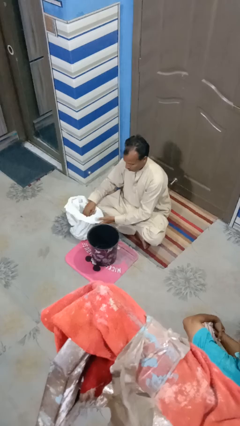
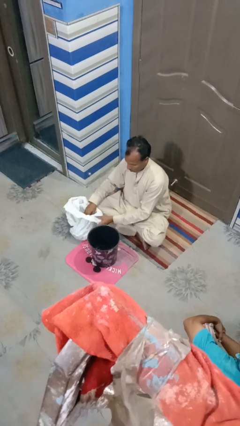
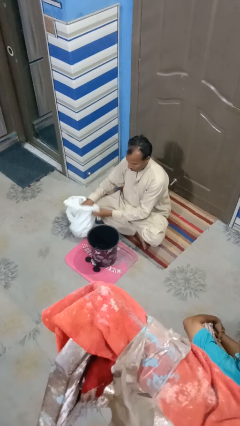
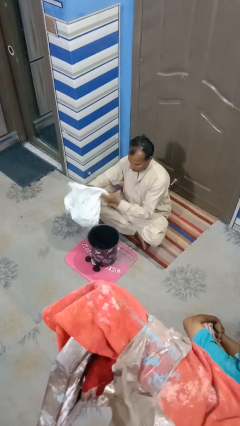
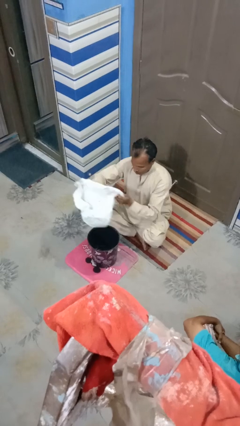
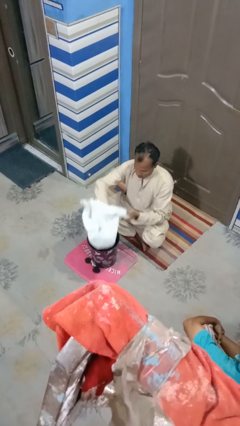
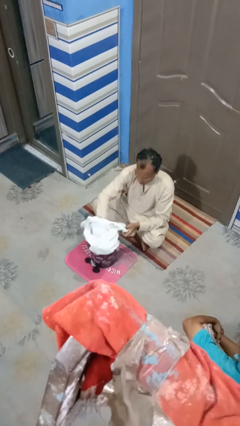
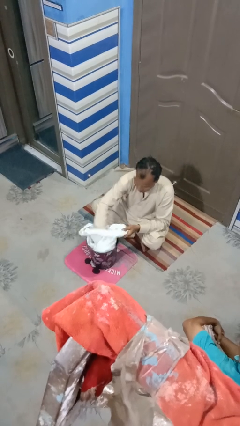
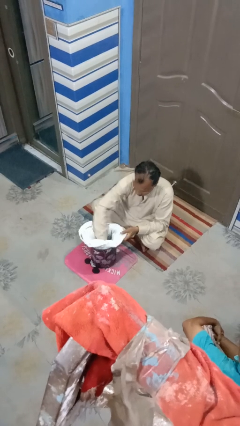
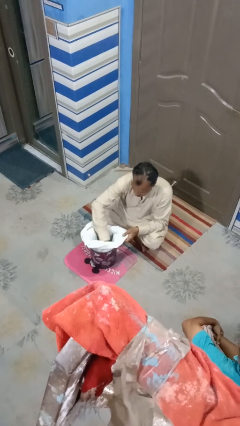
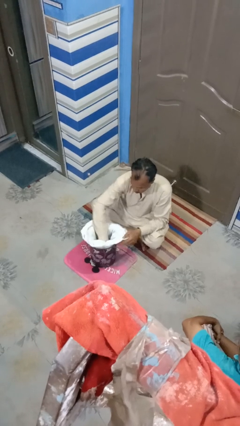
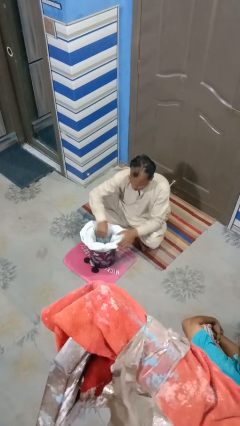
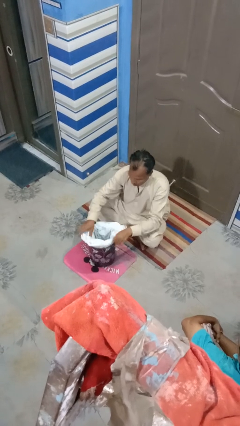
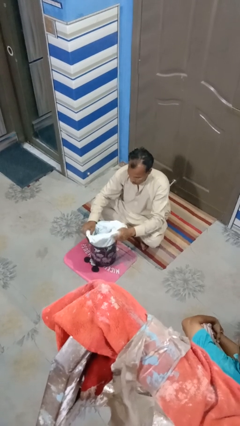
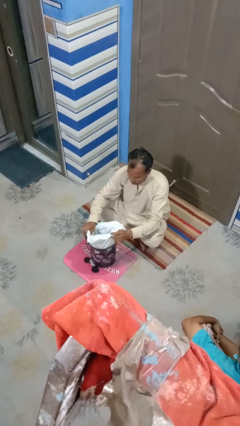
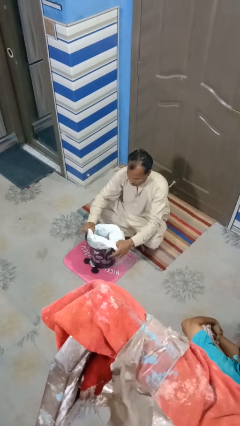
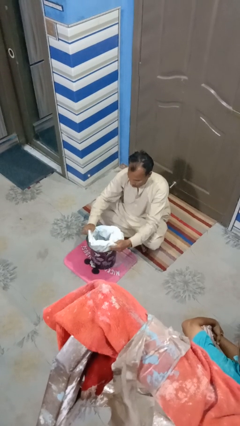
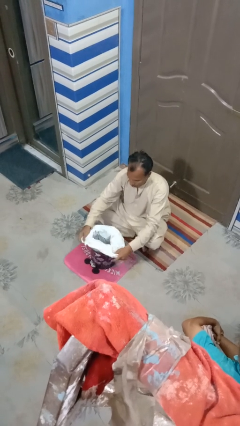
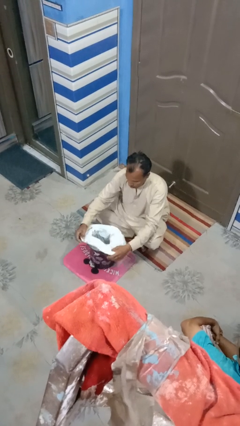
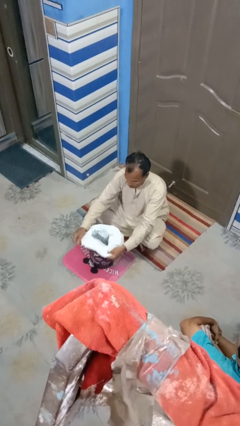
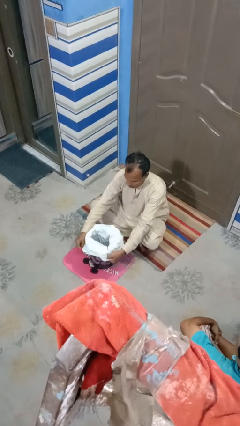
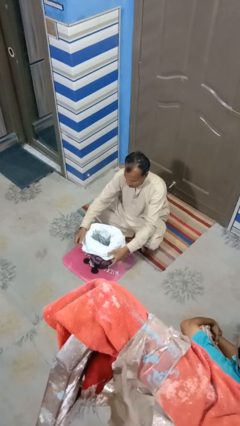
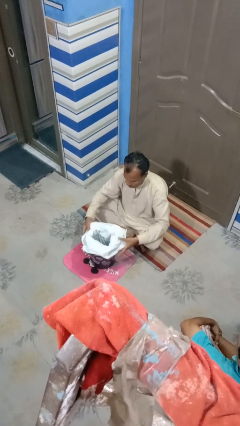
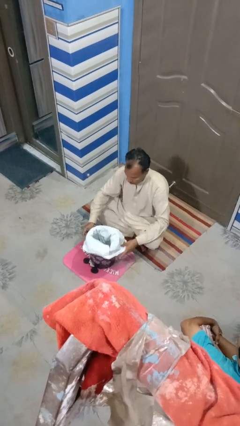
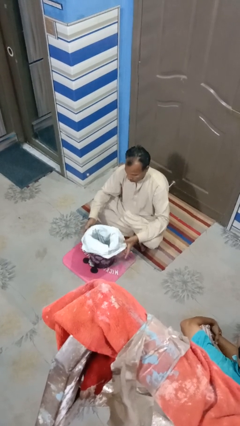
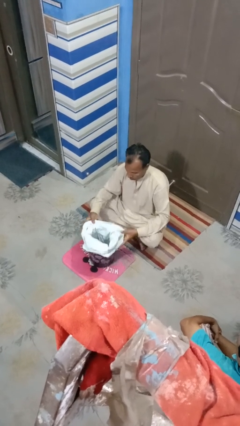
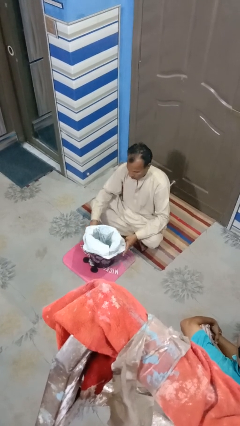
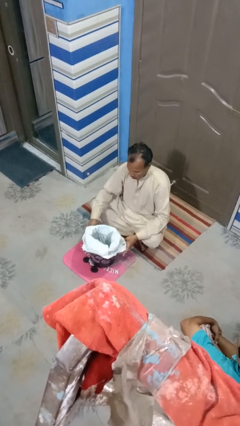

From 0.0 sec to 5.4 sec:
person removes trashbag from trashcan

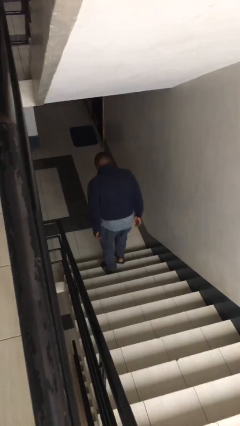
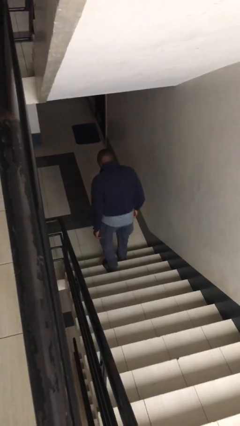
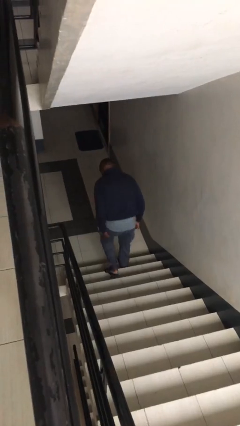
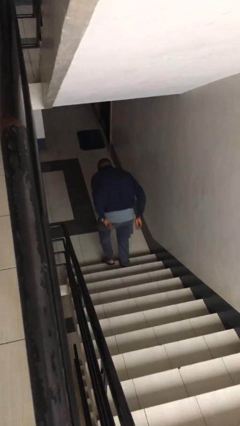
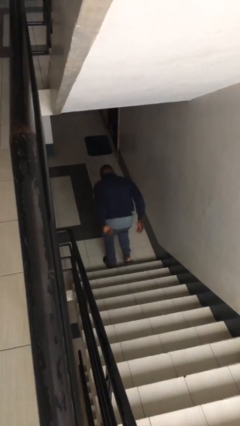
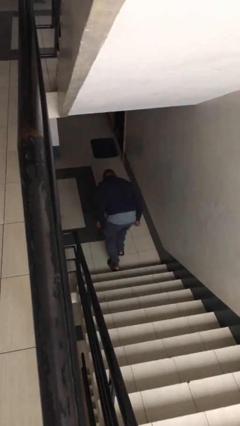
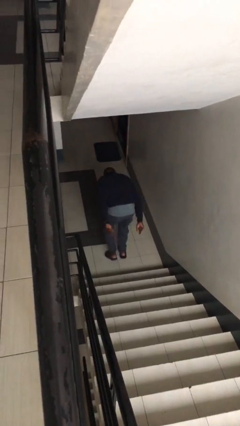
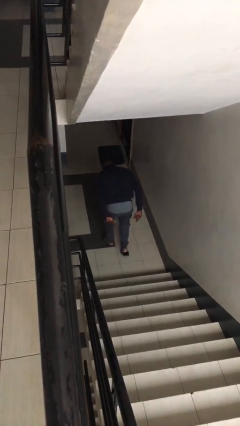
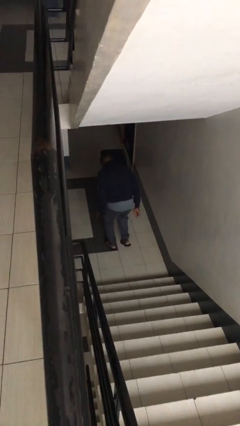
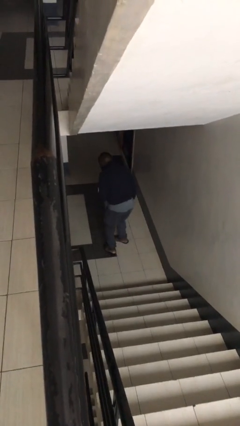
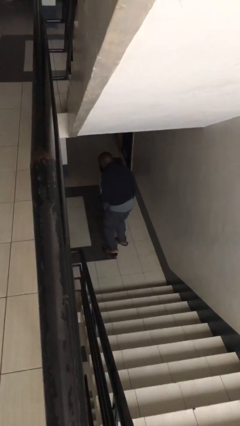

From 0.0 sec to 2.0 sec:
person trips on stair

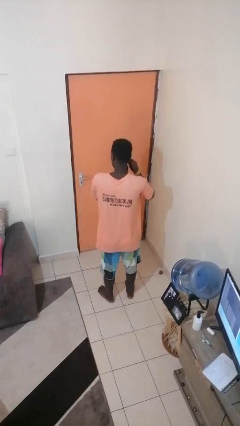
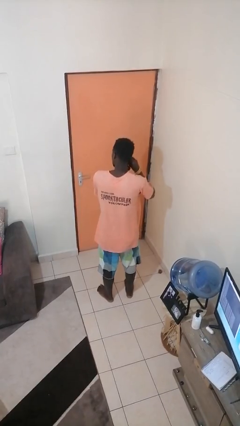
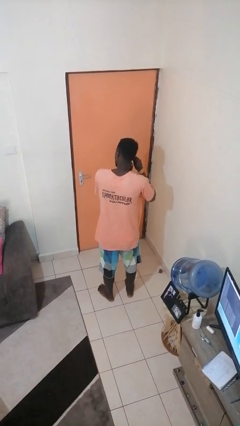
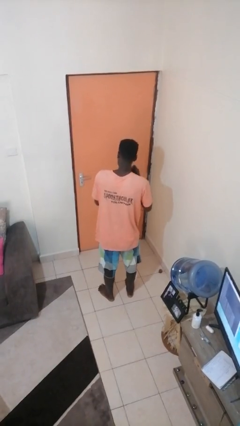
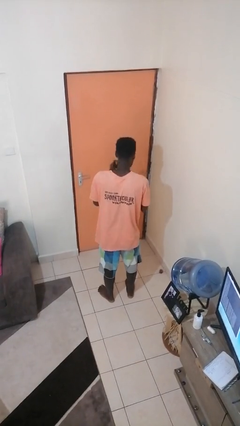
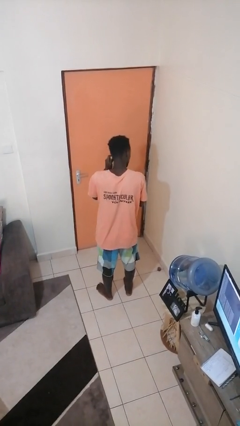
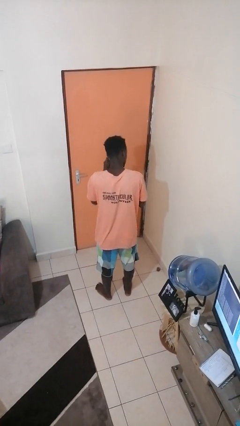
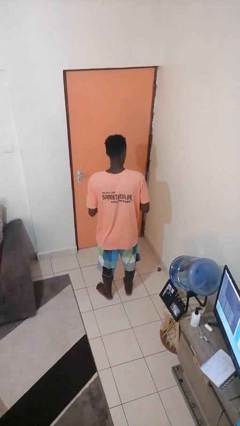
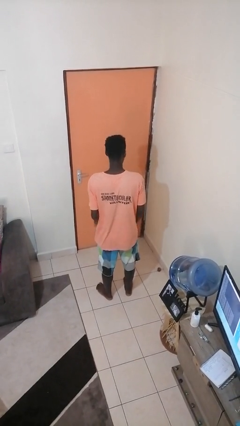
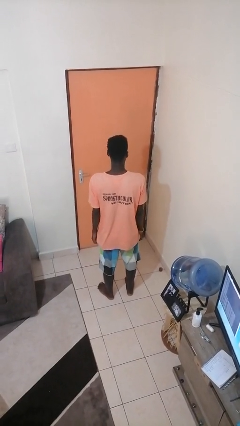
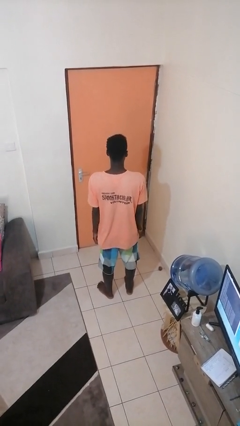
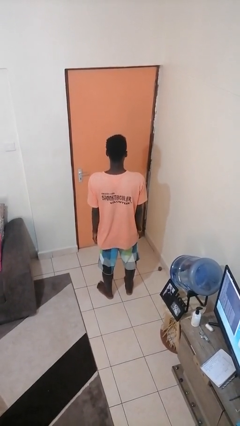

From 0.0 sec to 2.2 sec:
person takes off earrings

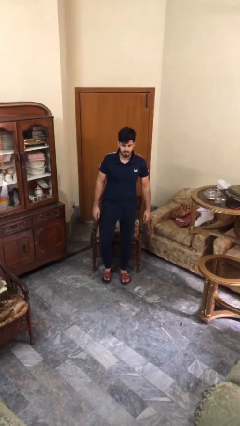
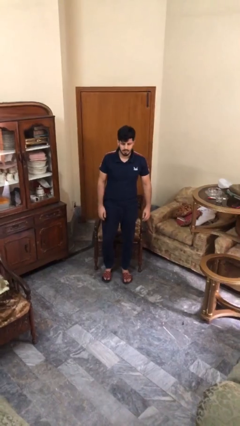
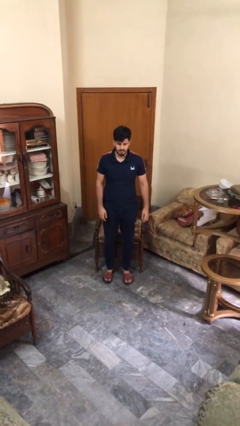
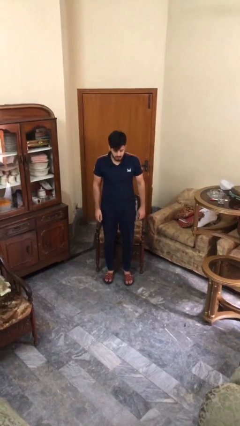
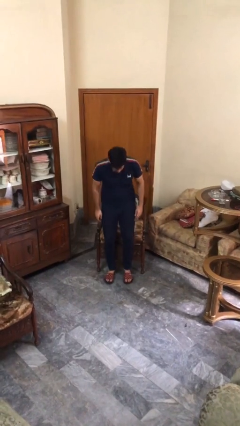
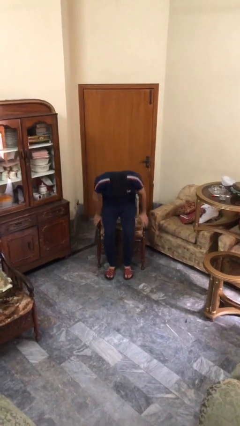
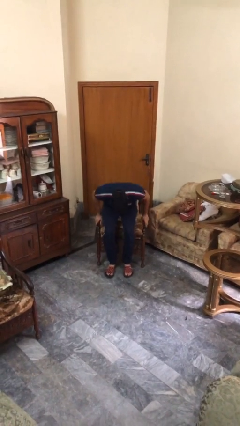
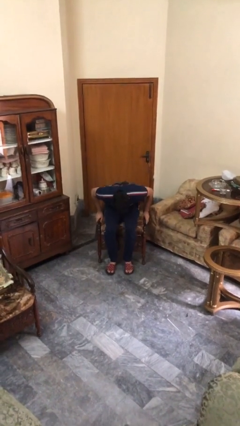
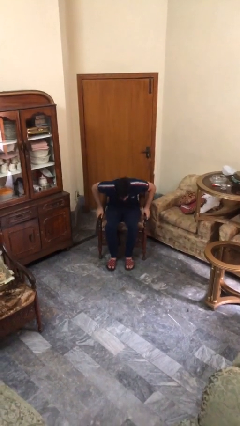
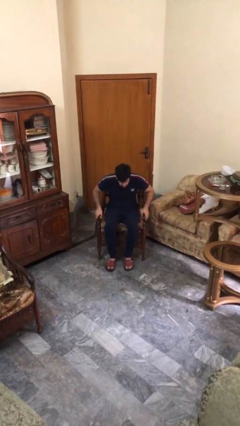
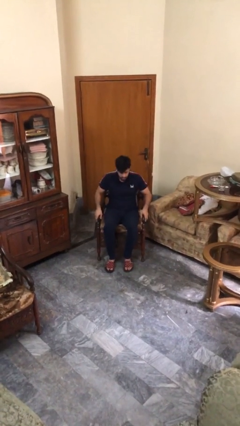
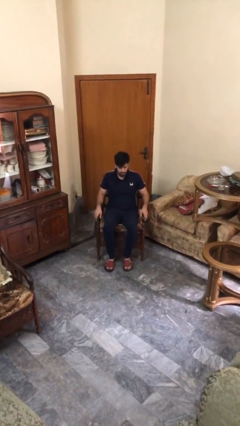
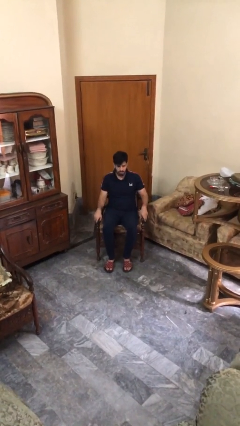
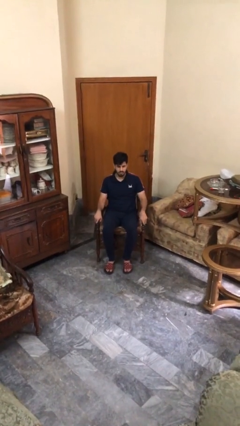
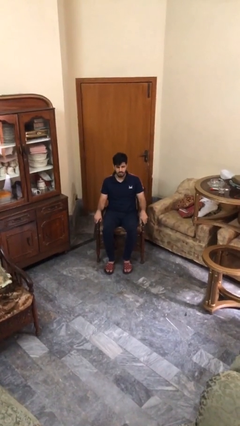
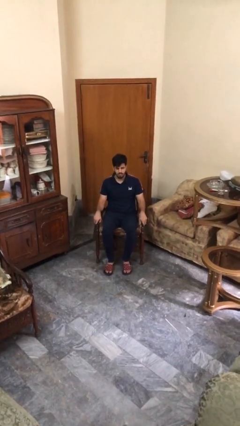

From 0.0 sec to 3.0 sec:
person sits down

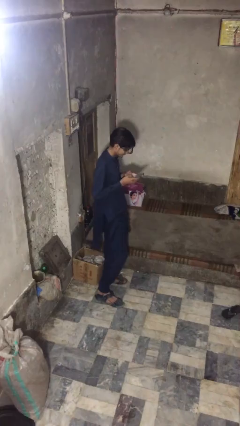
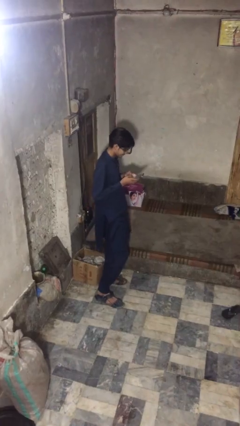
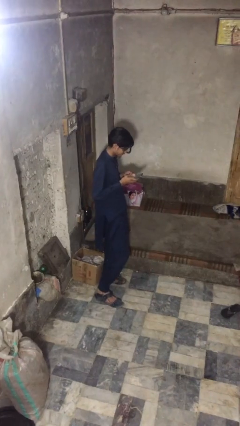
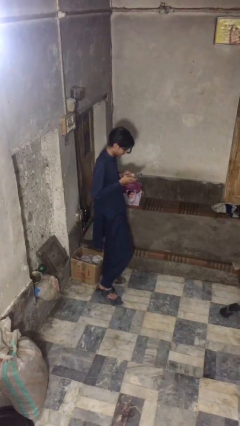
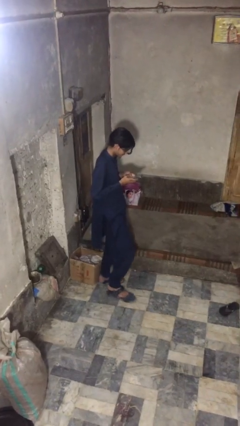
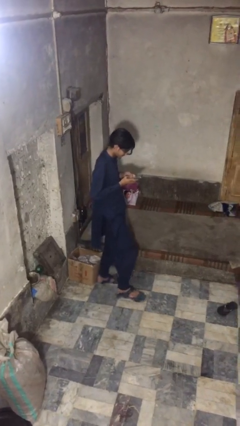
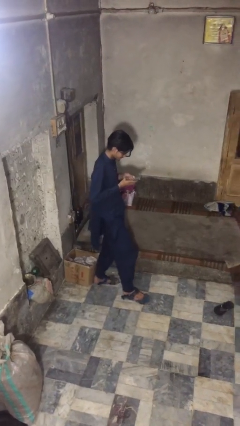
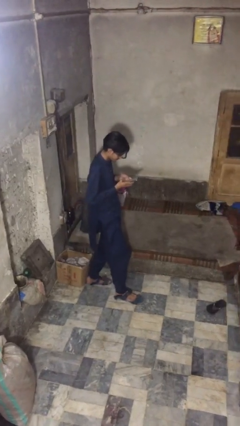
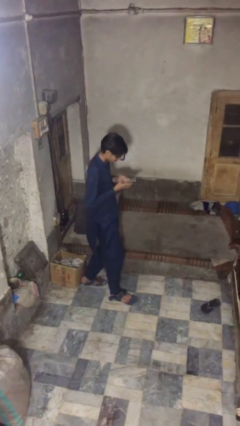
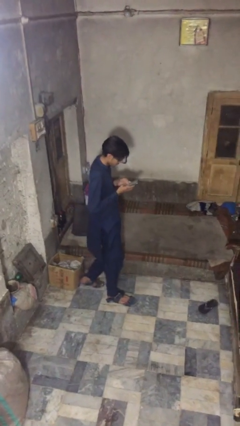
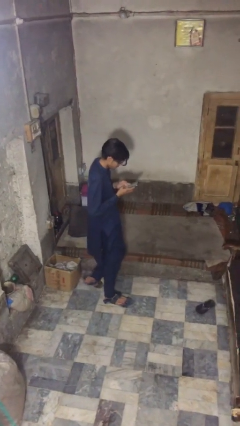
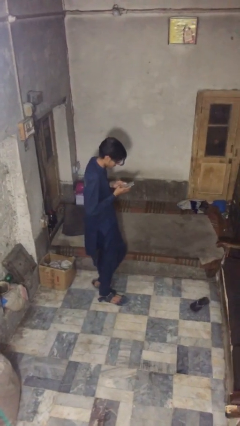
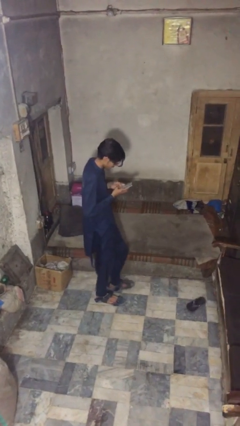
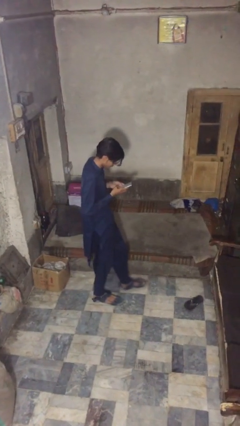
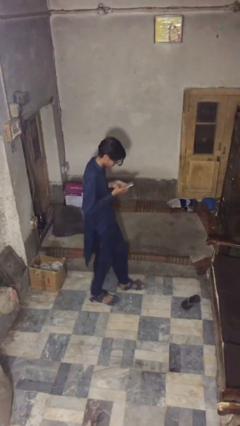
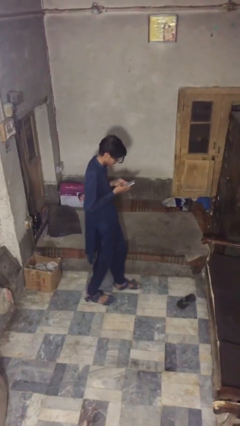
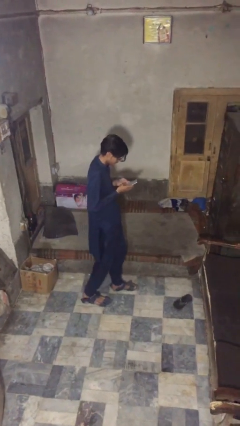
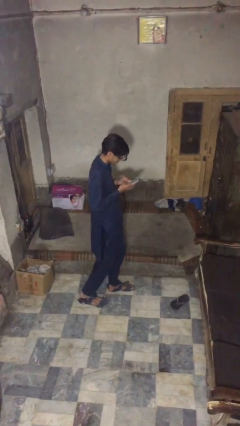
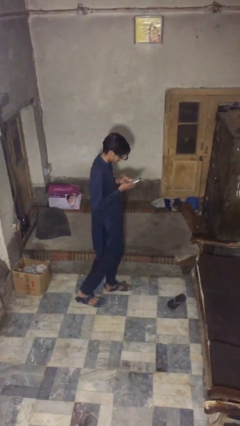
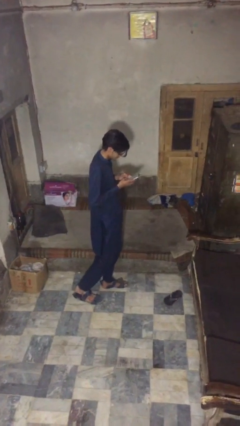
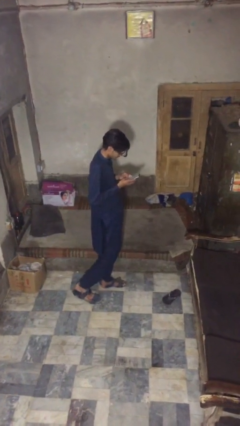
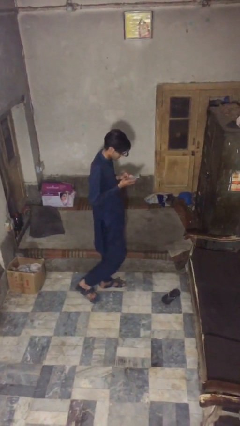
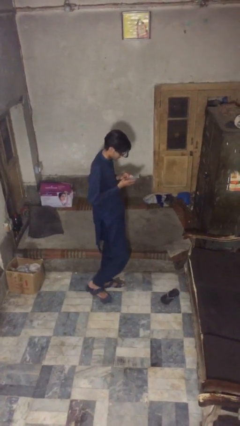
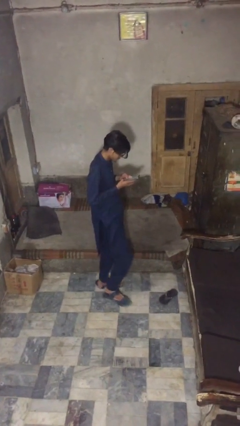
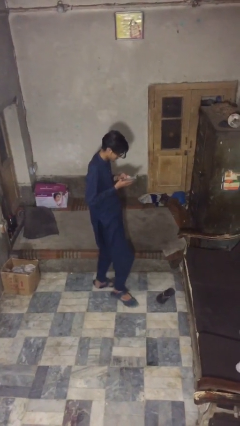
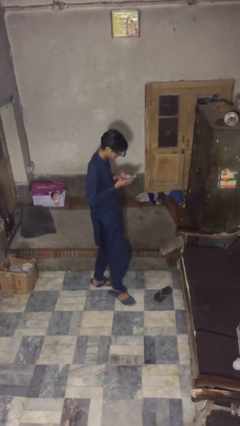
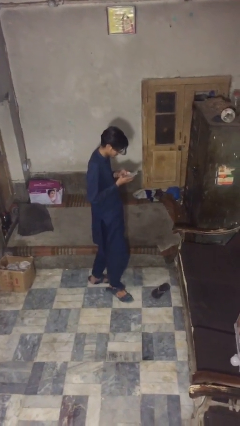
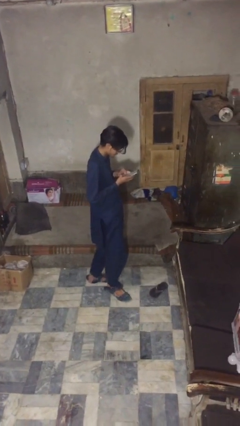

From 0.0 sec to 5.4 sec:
person texts on phone
